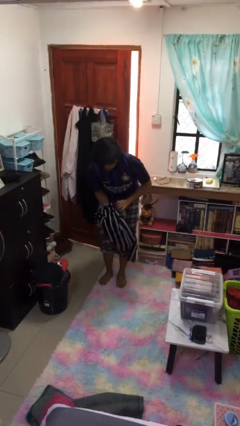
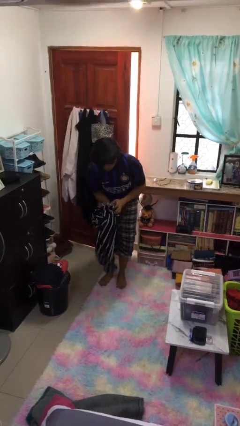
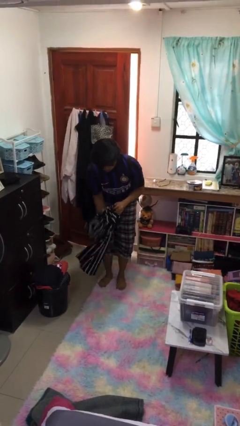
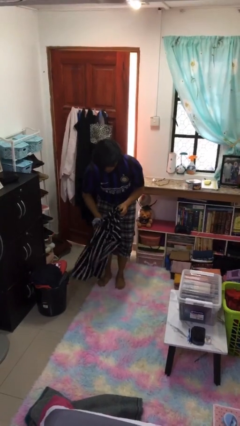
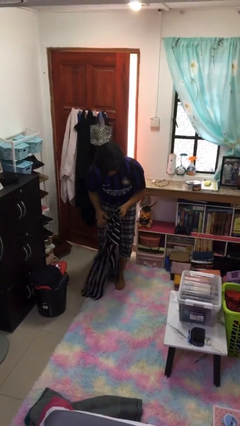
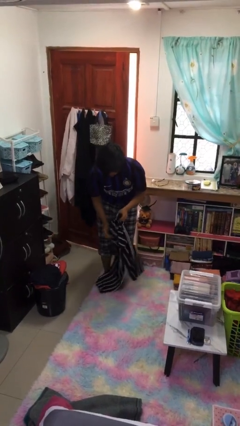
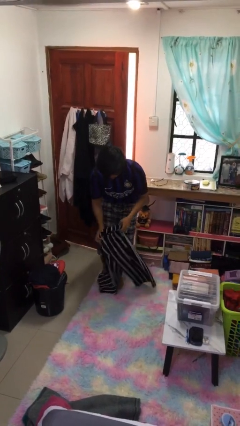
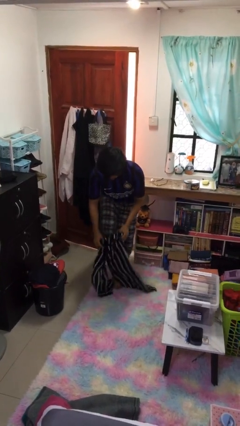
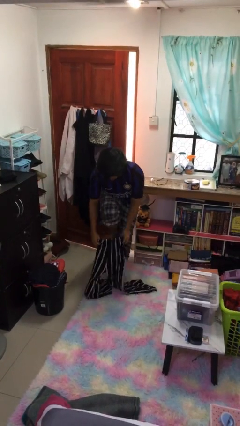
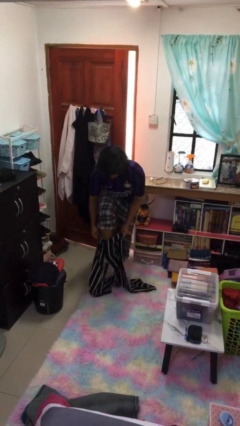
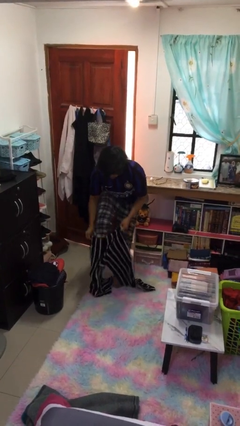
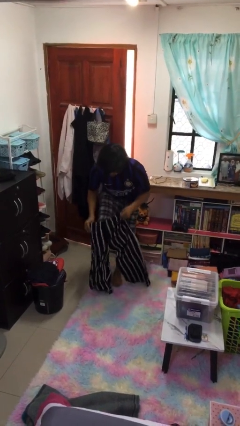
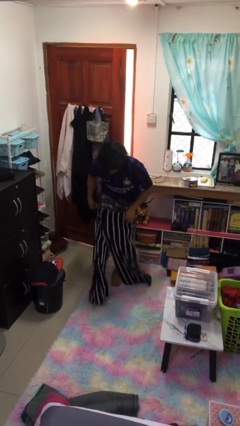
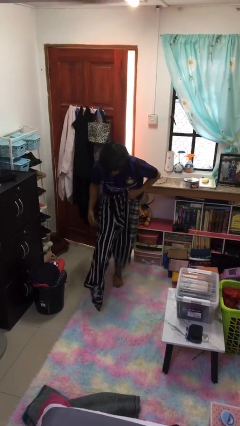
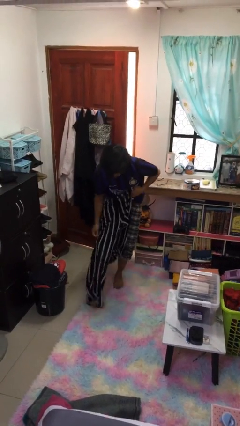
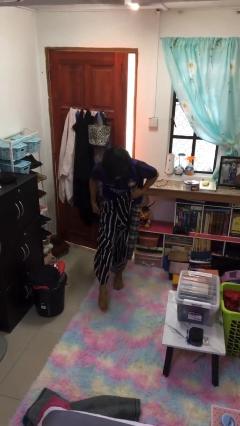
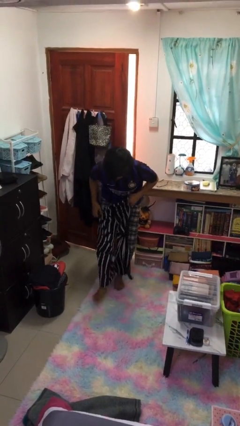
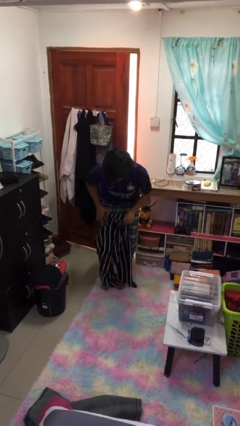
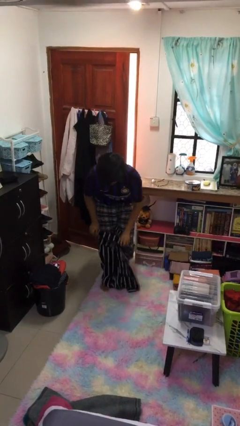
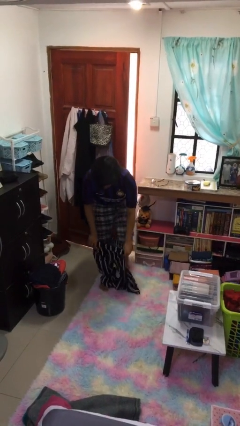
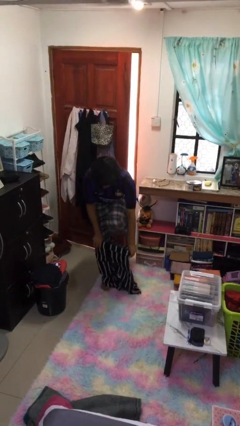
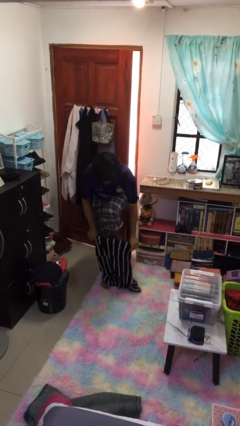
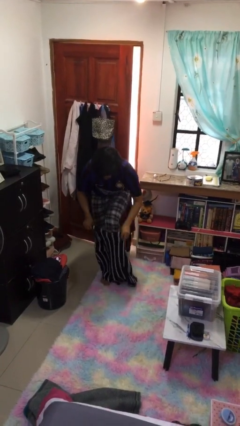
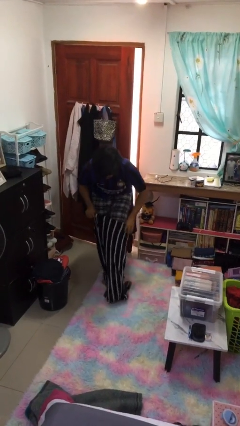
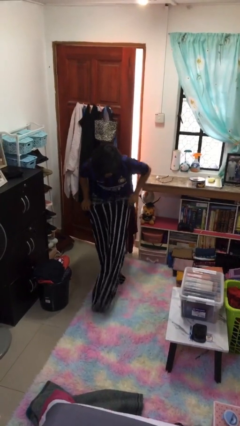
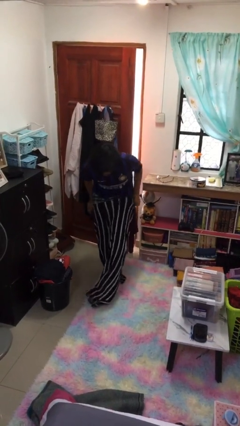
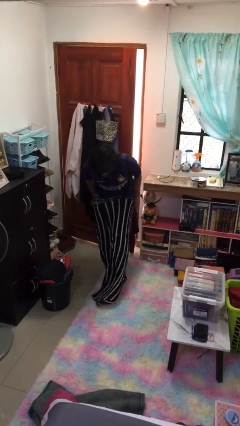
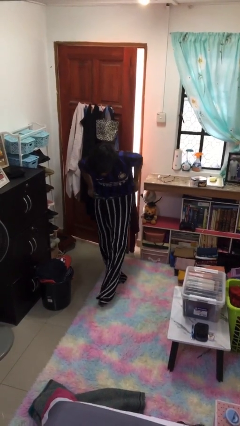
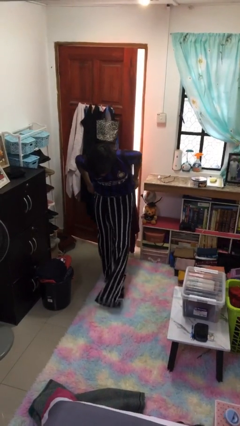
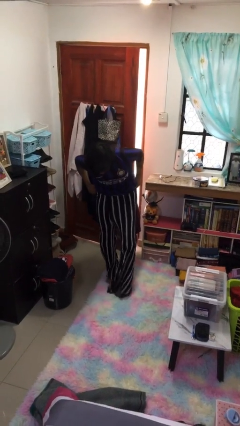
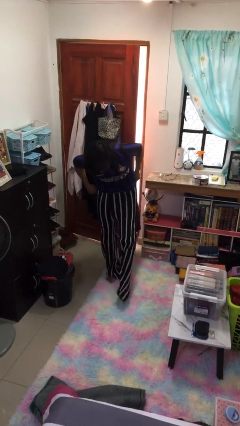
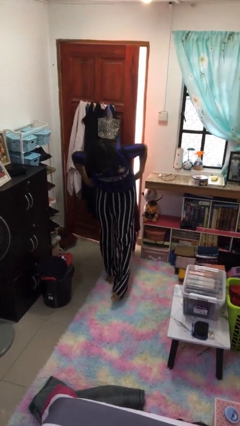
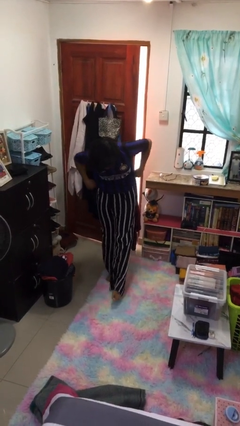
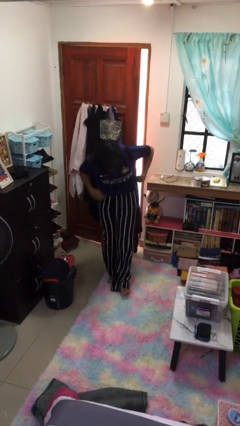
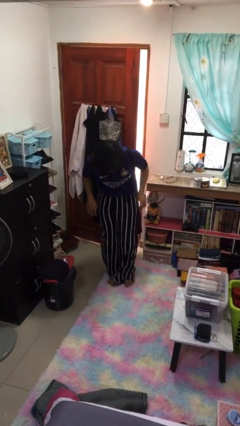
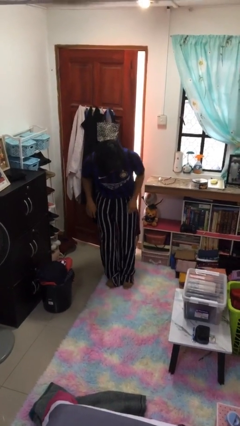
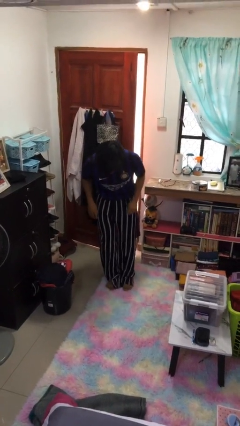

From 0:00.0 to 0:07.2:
person puts on pants

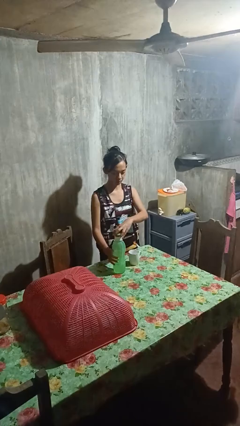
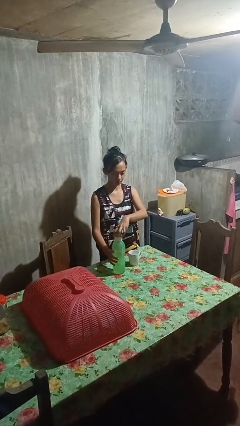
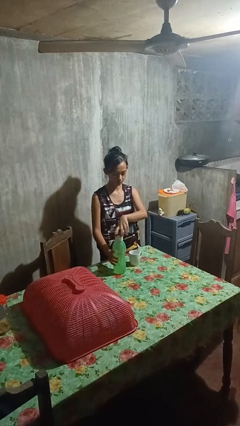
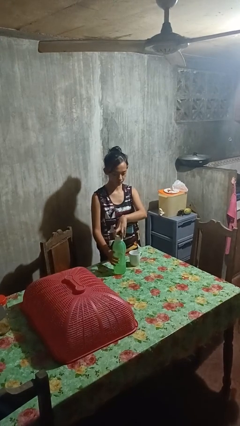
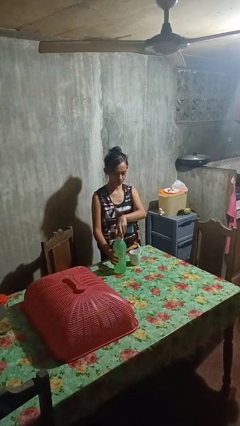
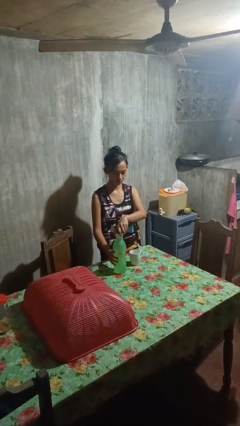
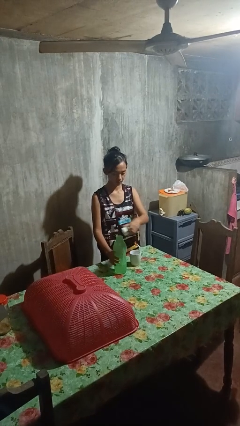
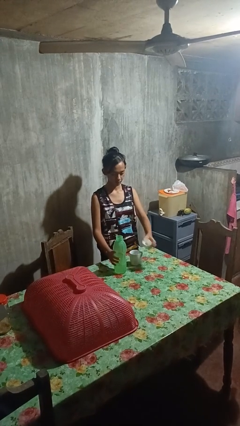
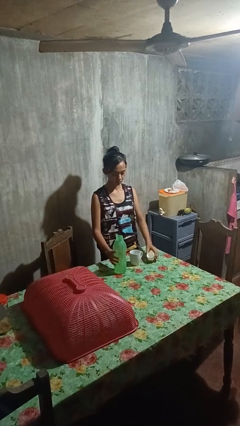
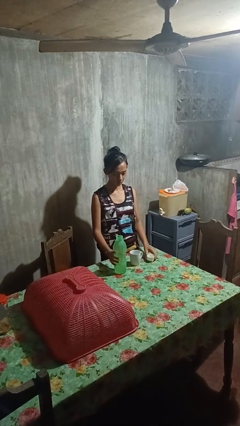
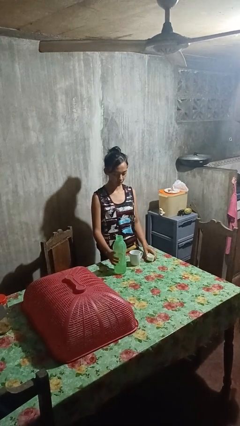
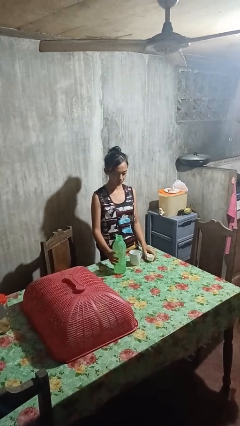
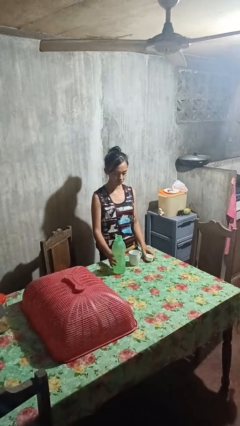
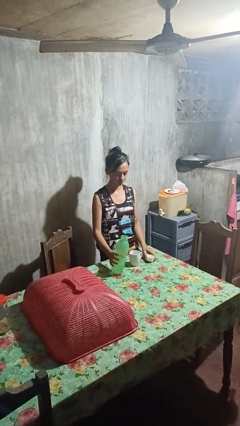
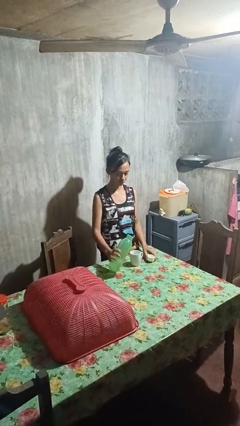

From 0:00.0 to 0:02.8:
person unscrews lid from bottle

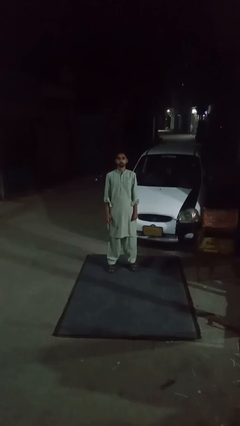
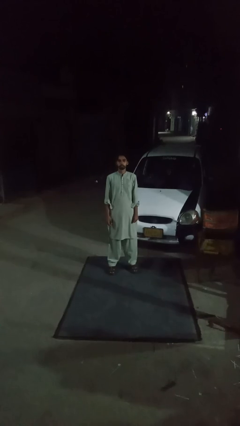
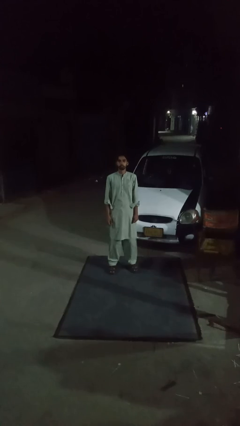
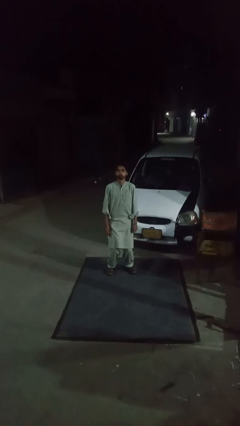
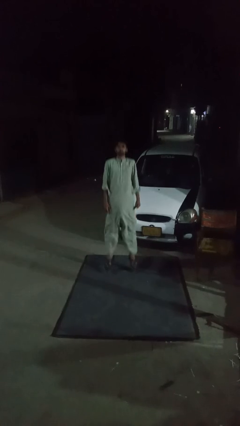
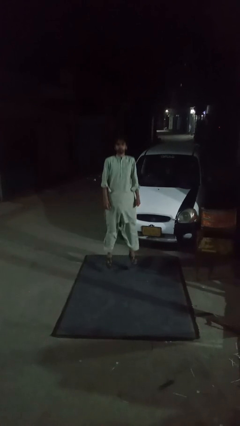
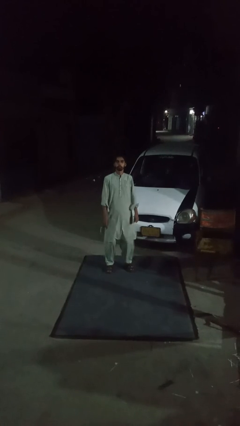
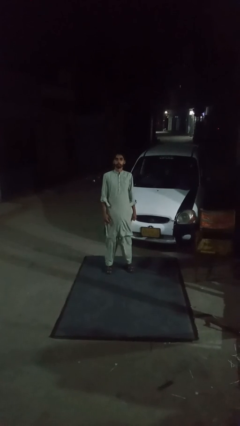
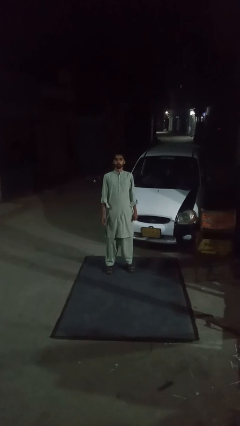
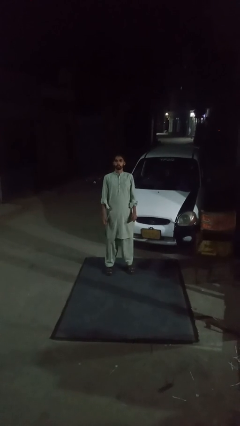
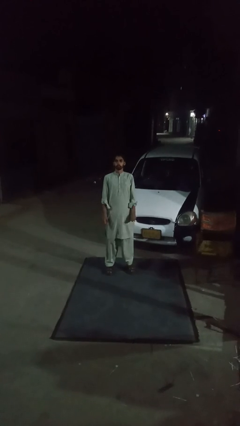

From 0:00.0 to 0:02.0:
person exercises with jumping jacks

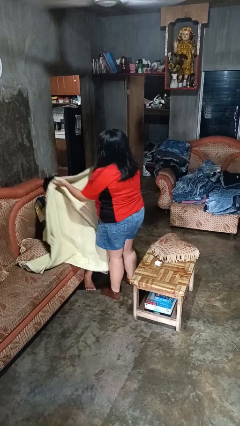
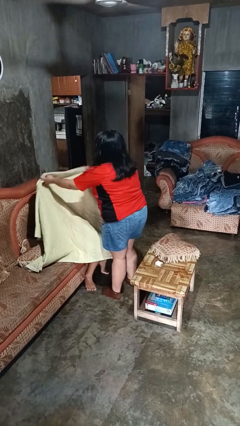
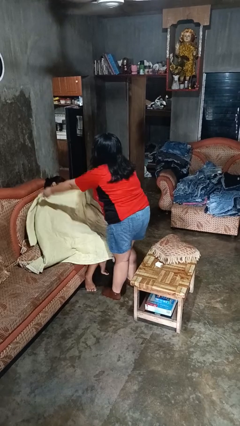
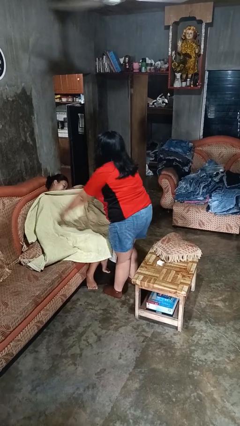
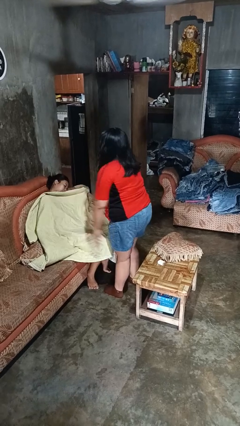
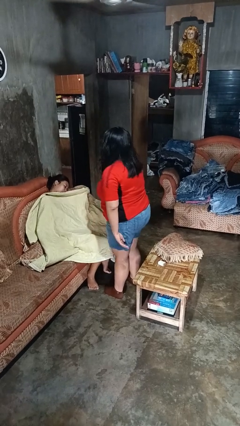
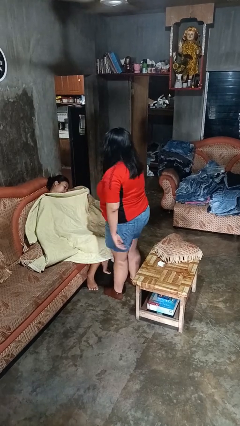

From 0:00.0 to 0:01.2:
person covers friend with blanket

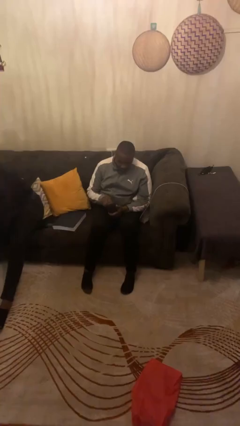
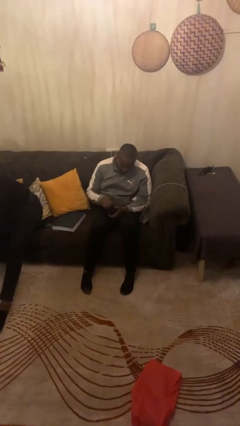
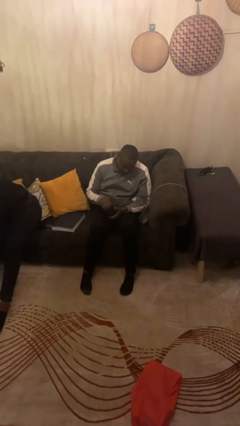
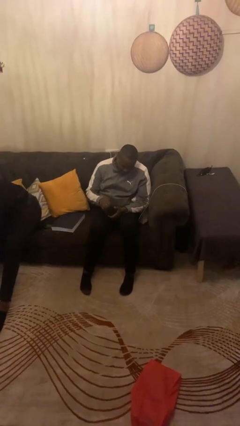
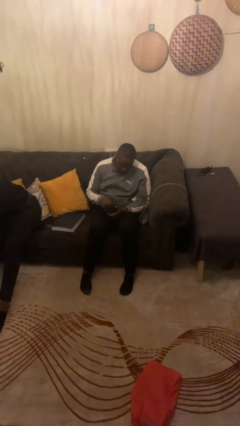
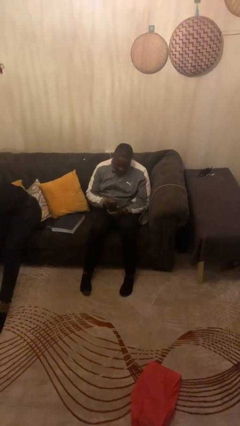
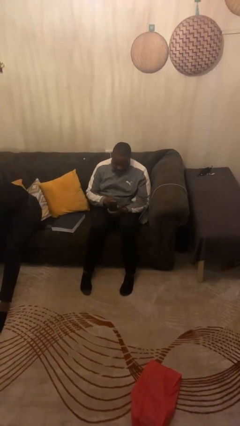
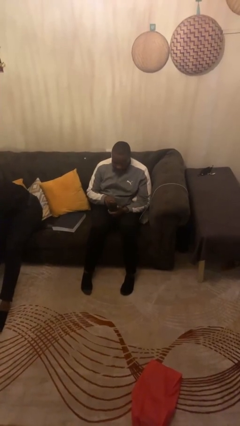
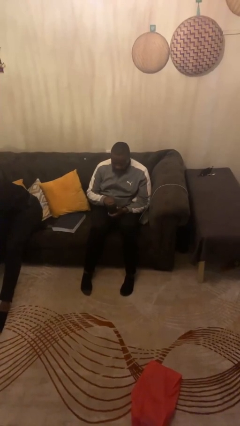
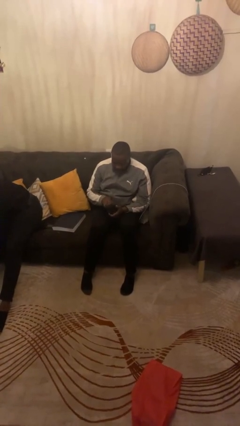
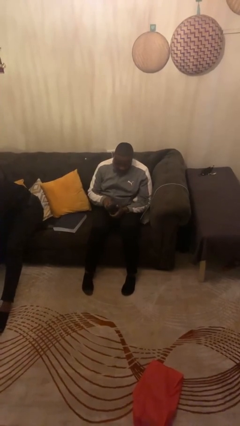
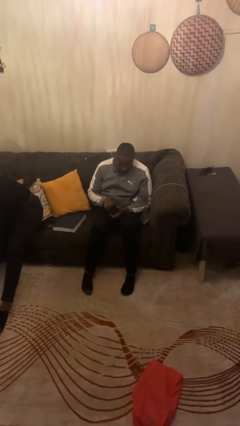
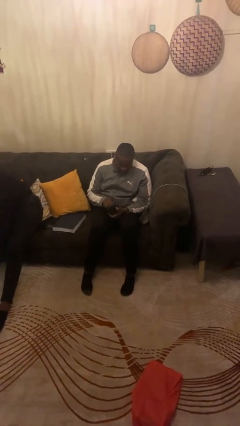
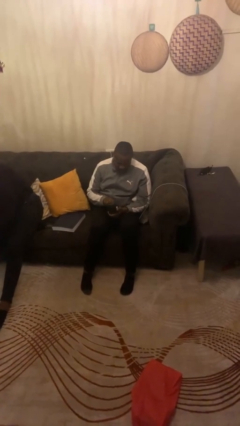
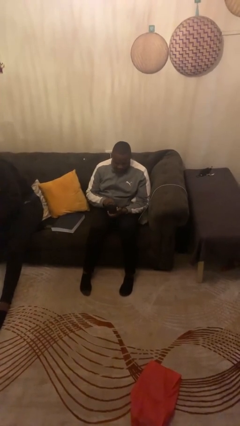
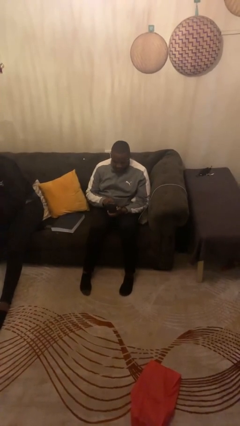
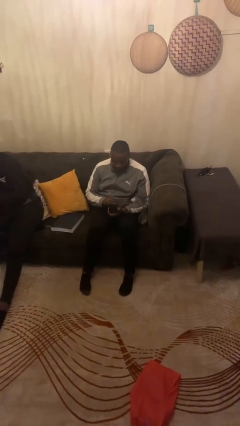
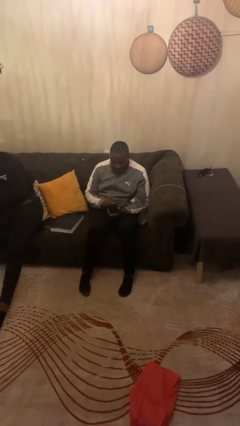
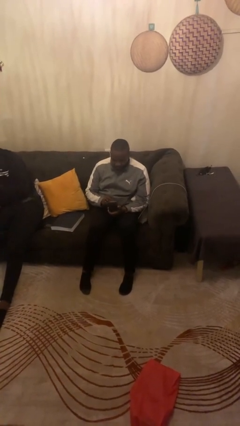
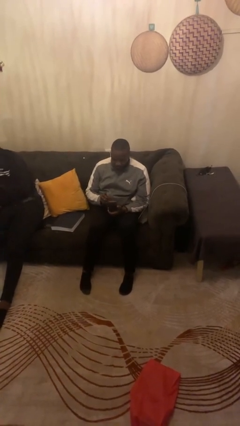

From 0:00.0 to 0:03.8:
person searches jewelry box

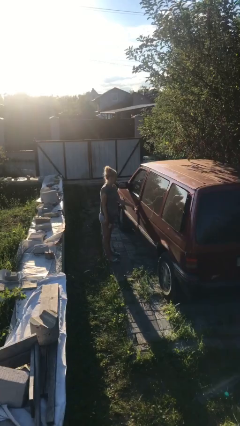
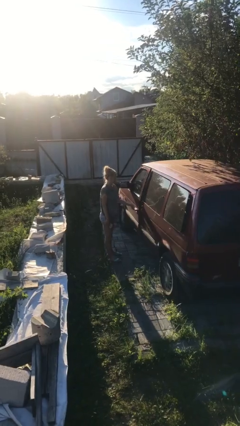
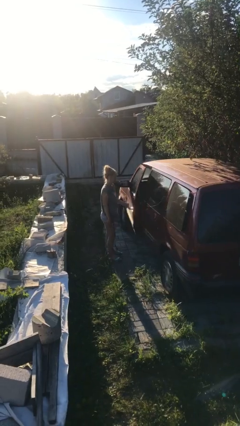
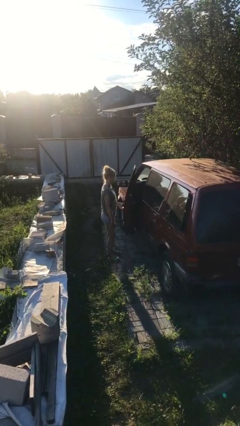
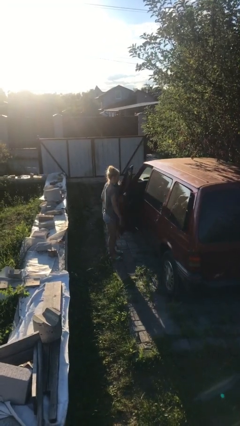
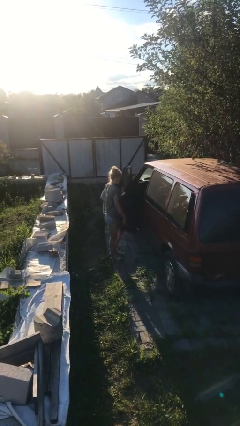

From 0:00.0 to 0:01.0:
person opens car door
